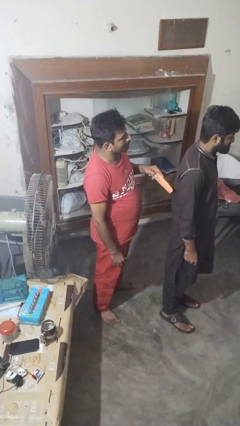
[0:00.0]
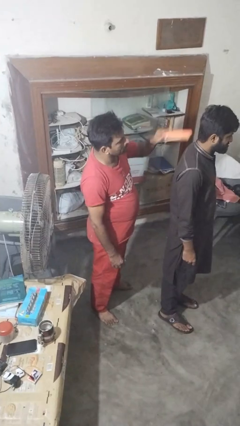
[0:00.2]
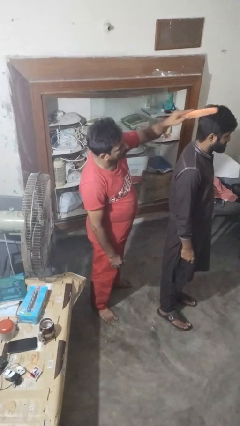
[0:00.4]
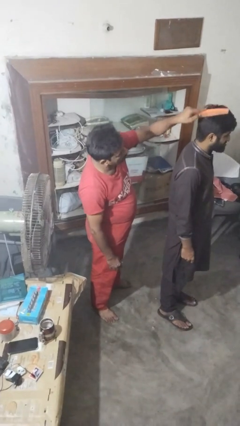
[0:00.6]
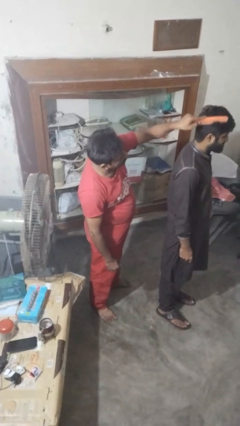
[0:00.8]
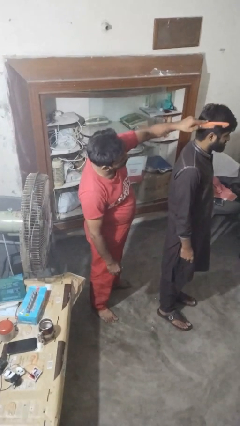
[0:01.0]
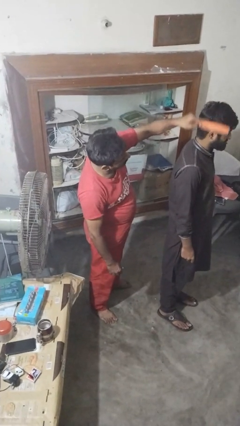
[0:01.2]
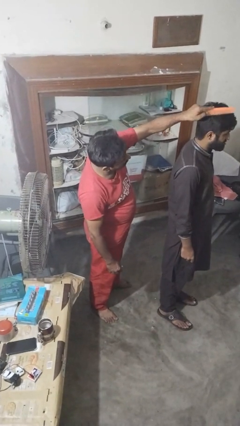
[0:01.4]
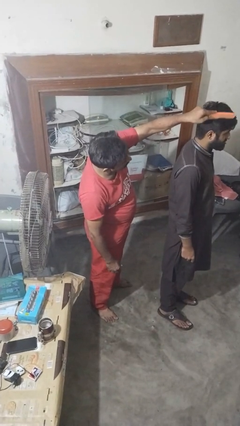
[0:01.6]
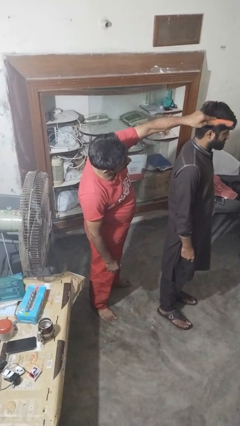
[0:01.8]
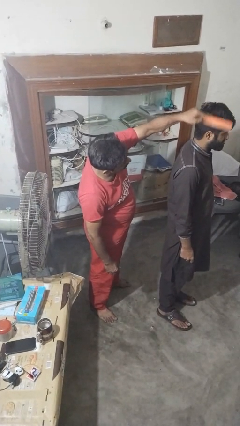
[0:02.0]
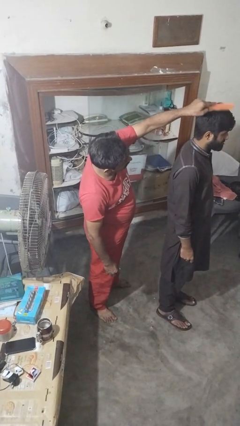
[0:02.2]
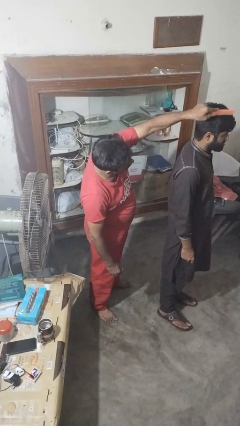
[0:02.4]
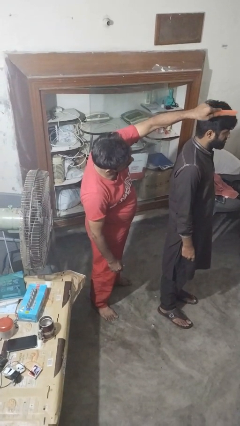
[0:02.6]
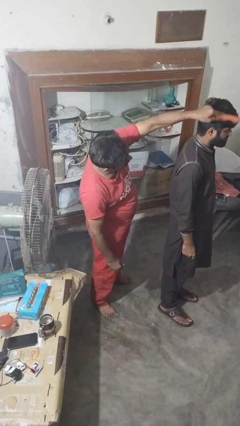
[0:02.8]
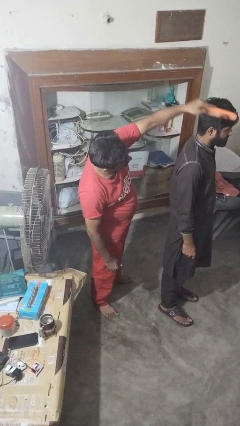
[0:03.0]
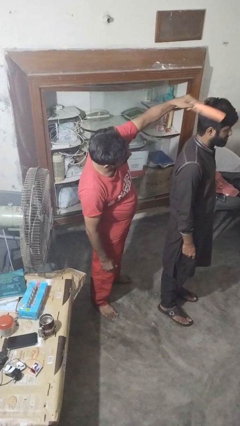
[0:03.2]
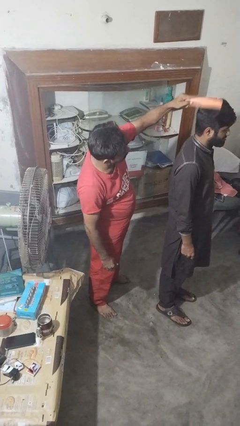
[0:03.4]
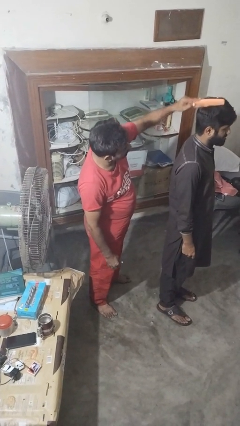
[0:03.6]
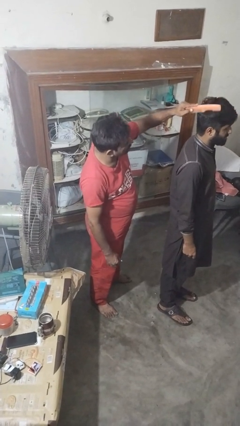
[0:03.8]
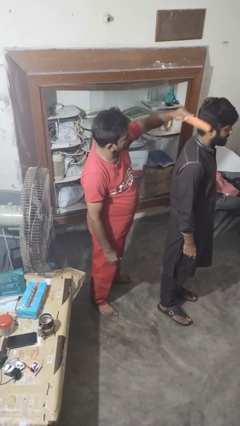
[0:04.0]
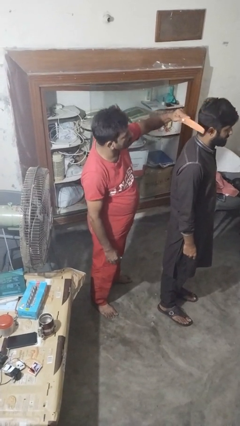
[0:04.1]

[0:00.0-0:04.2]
person brushes hair of person

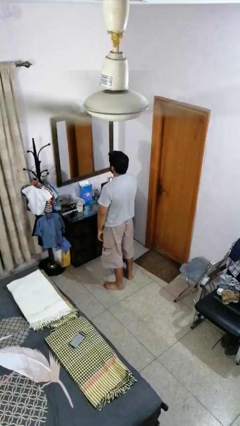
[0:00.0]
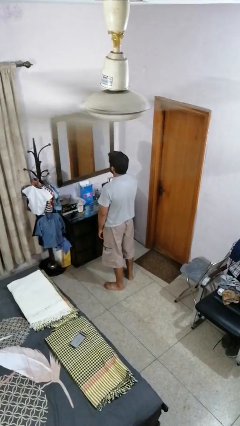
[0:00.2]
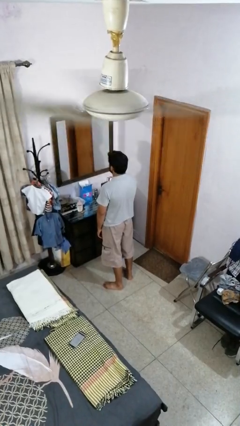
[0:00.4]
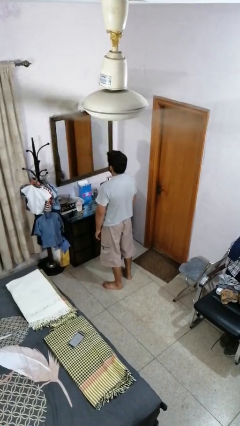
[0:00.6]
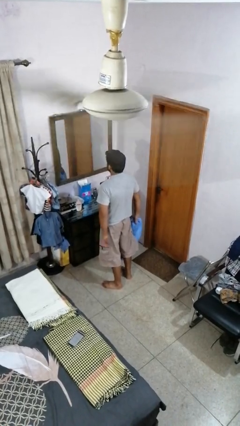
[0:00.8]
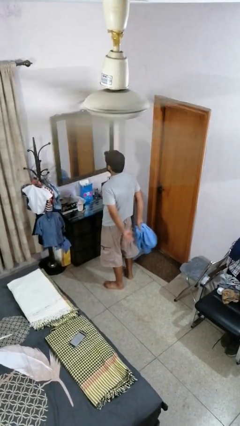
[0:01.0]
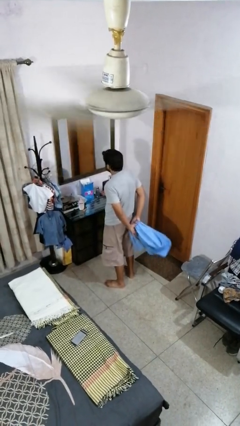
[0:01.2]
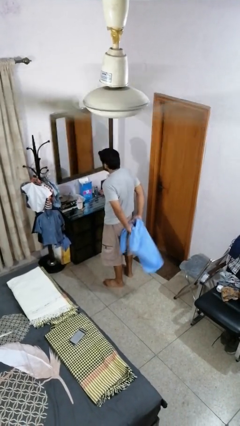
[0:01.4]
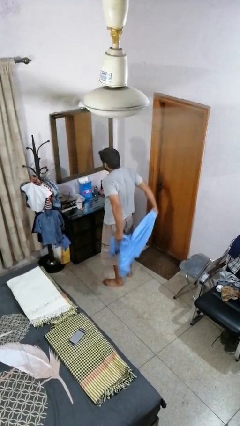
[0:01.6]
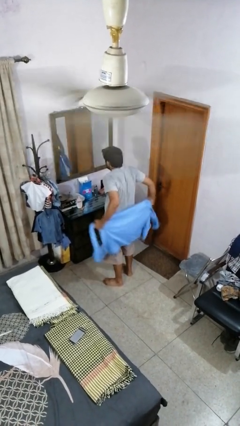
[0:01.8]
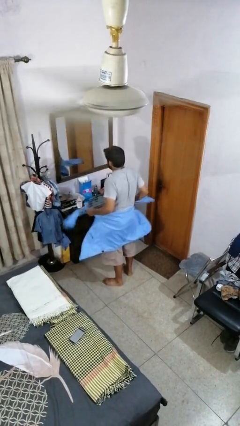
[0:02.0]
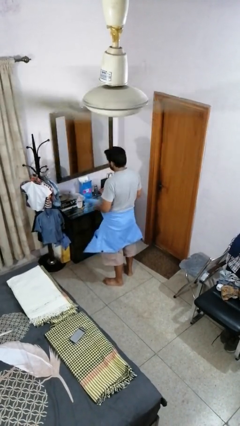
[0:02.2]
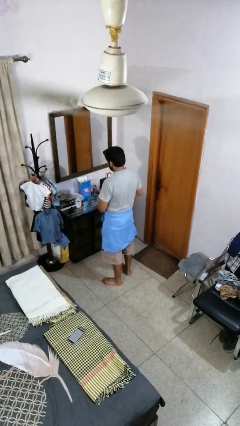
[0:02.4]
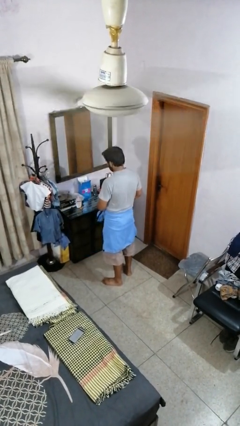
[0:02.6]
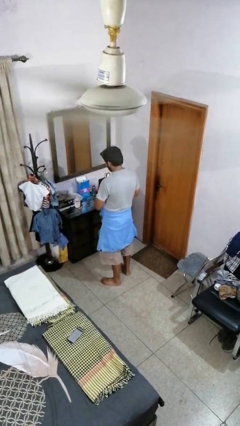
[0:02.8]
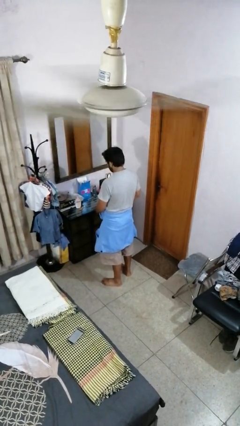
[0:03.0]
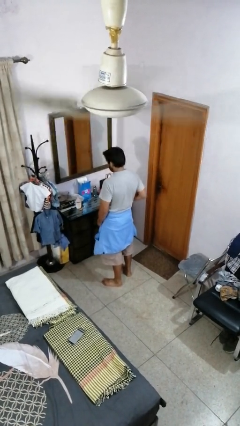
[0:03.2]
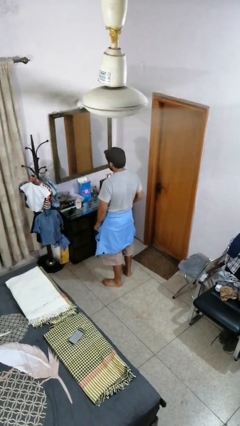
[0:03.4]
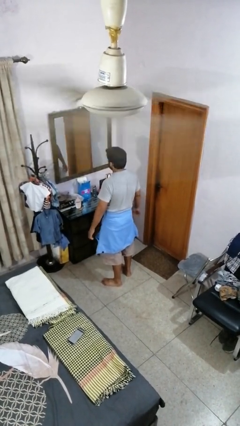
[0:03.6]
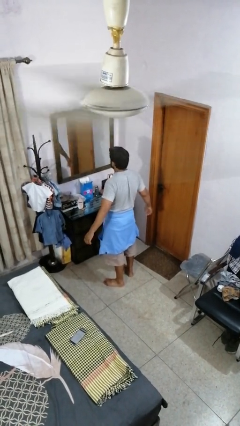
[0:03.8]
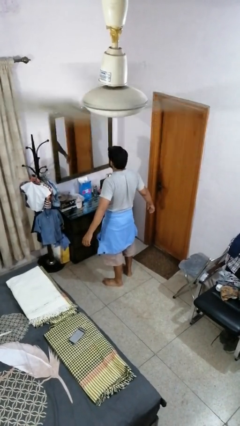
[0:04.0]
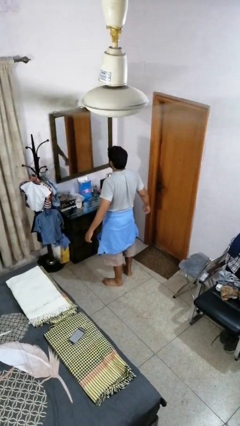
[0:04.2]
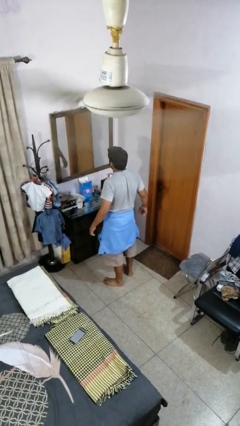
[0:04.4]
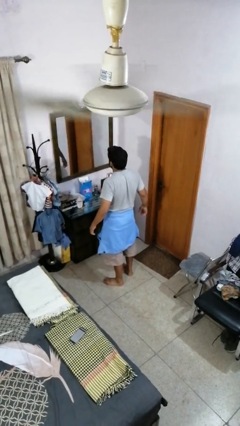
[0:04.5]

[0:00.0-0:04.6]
person ties jacket around waist

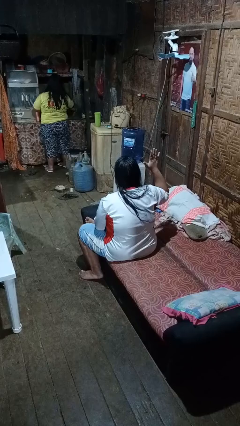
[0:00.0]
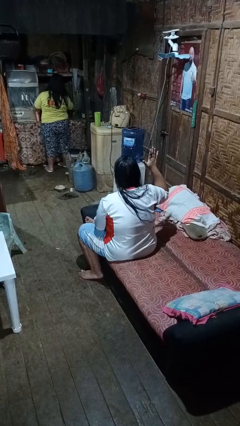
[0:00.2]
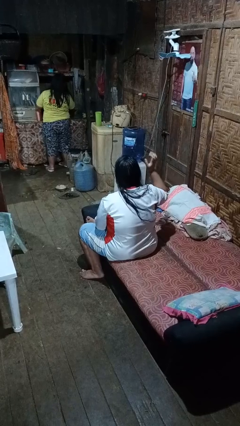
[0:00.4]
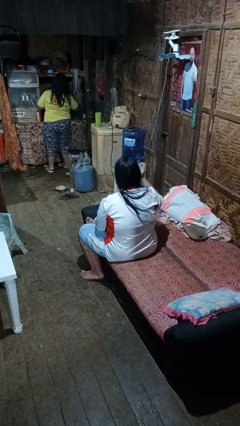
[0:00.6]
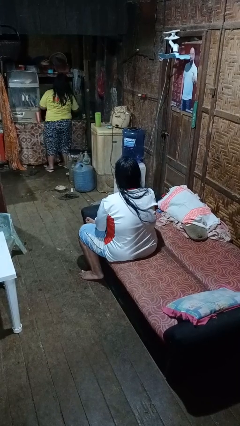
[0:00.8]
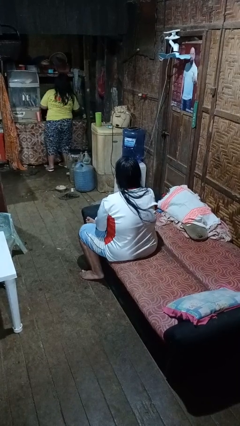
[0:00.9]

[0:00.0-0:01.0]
person gestures number five

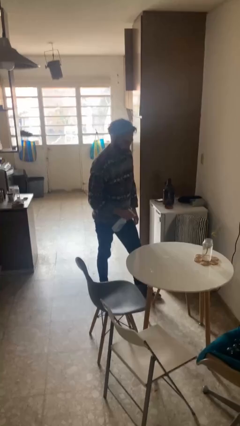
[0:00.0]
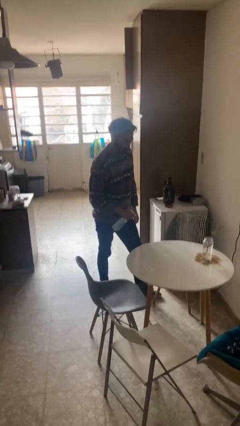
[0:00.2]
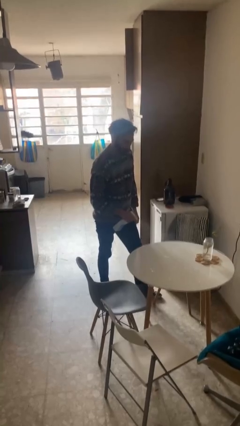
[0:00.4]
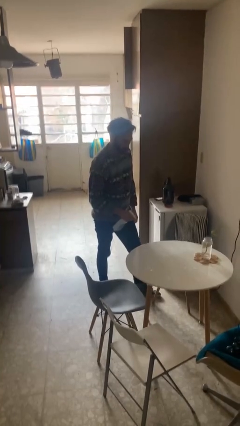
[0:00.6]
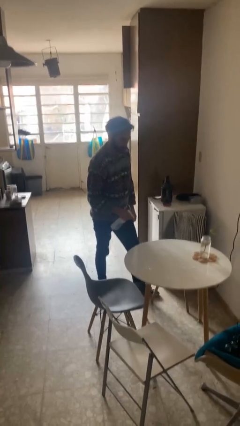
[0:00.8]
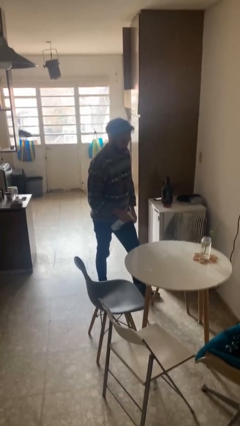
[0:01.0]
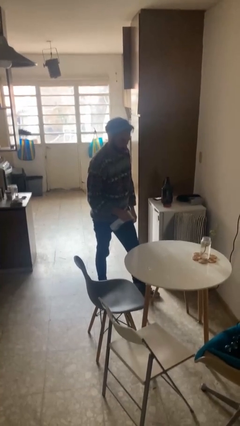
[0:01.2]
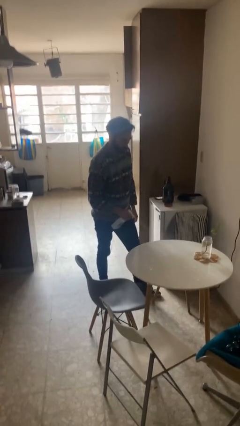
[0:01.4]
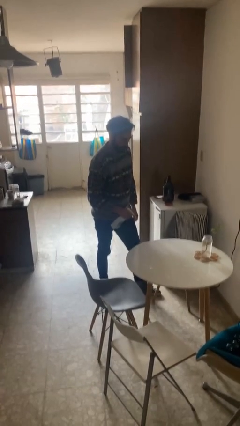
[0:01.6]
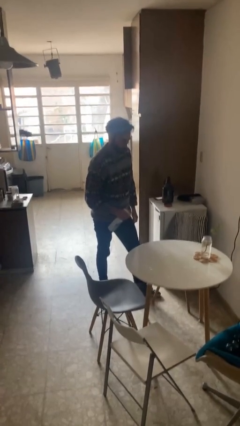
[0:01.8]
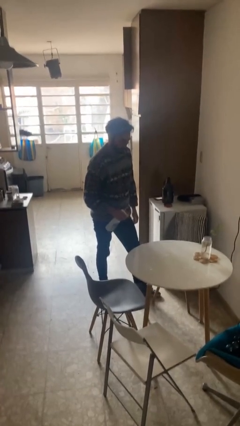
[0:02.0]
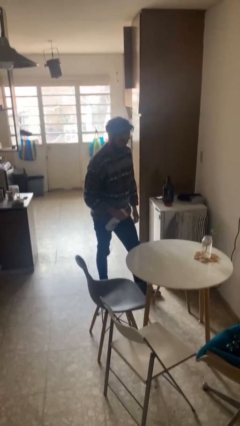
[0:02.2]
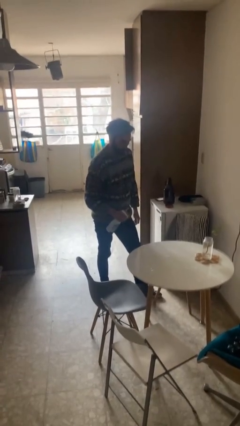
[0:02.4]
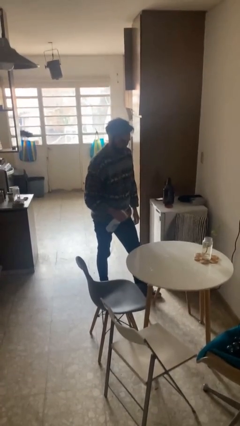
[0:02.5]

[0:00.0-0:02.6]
person sprays from bottle

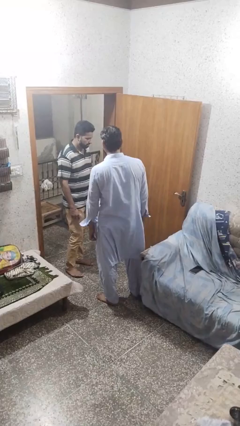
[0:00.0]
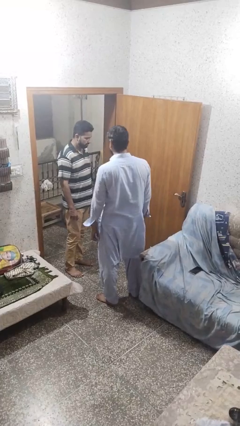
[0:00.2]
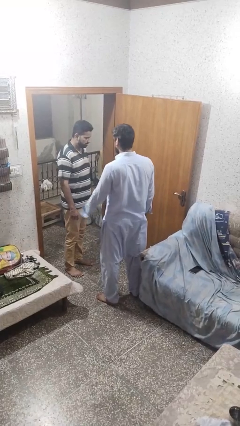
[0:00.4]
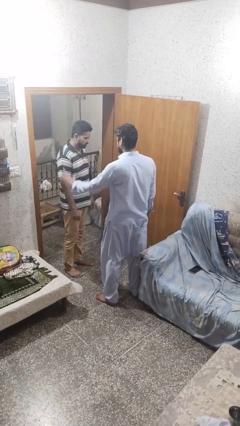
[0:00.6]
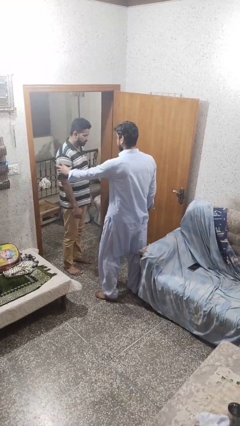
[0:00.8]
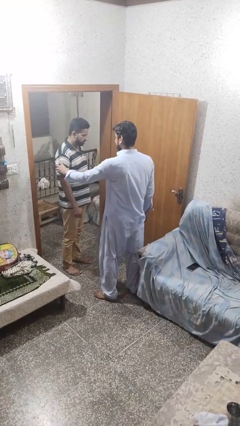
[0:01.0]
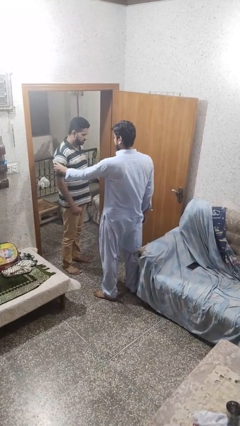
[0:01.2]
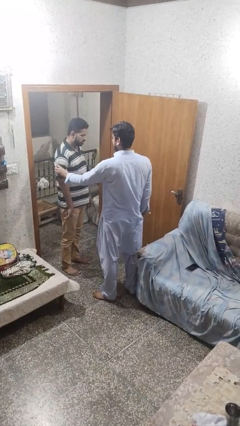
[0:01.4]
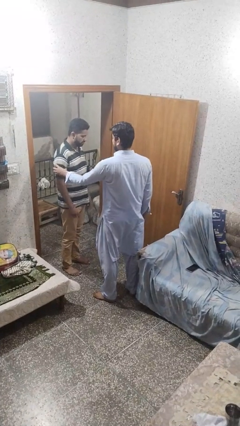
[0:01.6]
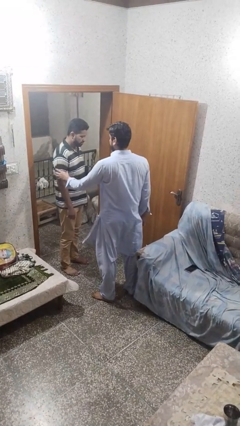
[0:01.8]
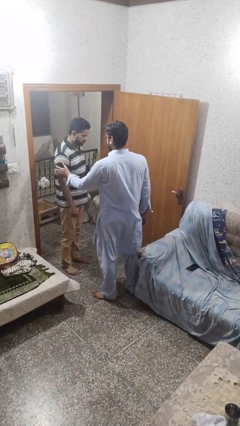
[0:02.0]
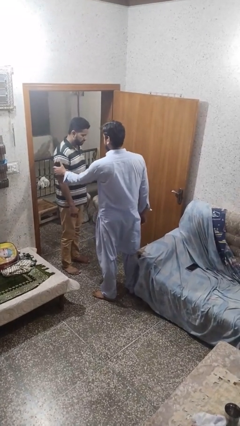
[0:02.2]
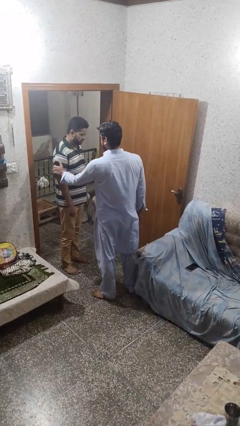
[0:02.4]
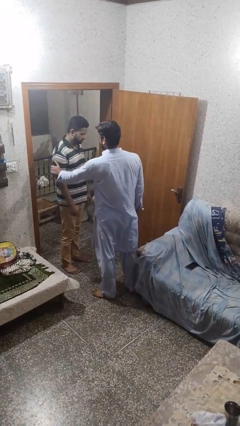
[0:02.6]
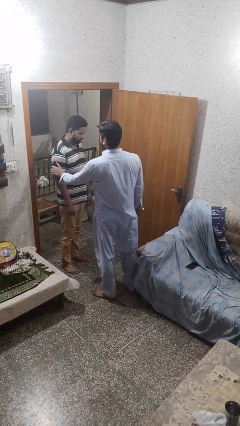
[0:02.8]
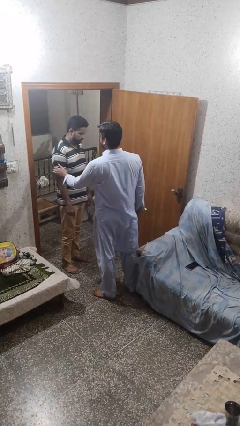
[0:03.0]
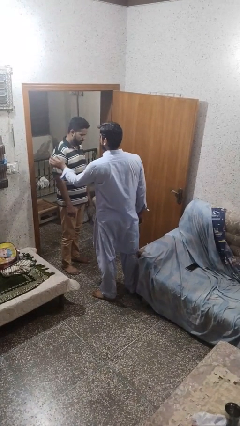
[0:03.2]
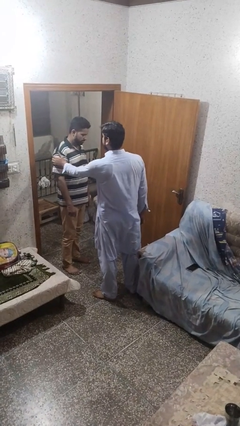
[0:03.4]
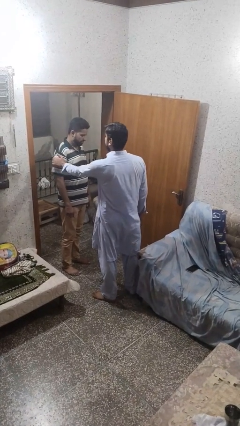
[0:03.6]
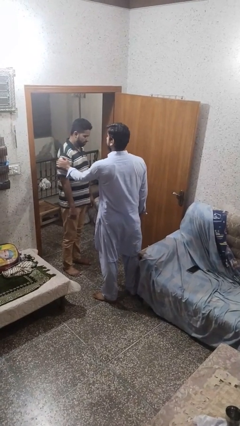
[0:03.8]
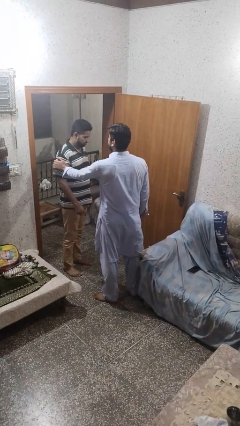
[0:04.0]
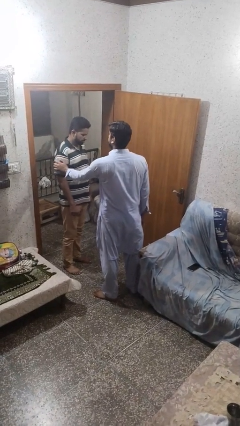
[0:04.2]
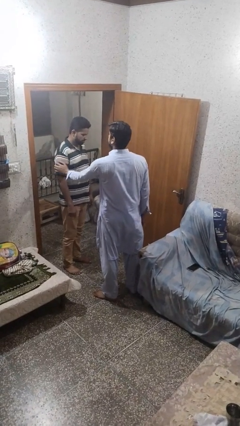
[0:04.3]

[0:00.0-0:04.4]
person grabs person by bicep

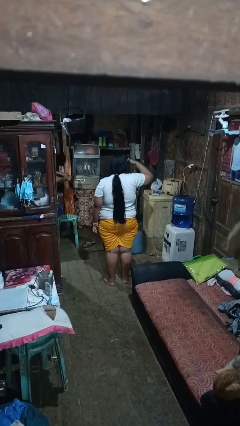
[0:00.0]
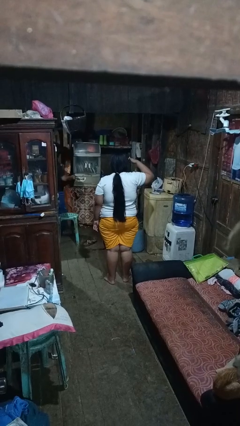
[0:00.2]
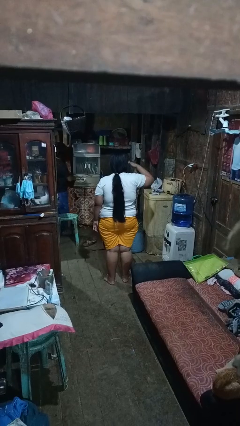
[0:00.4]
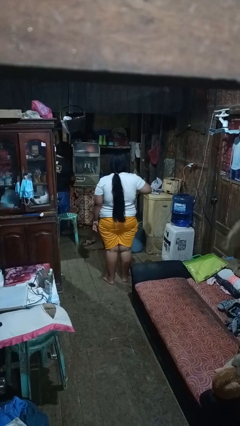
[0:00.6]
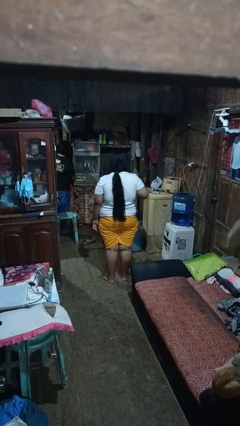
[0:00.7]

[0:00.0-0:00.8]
person salutes

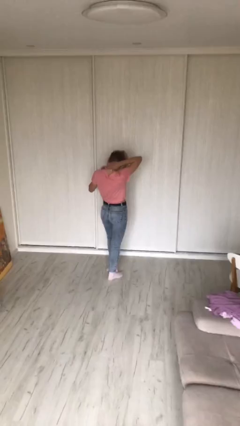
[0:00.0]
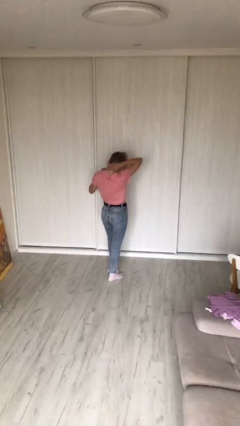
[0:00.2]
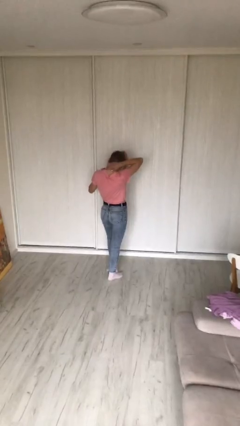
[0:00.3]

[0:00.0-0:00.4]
person swats bug
